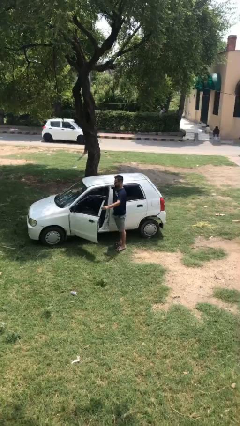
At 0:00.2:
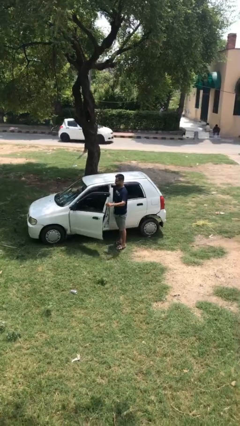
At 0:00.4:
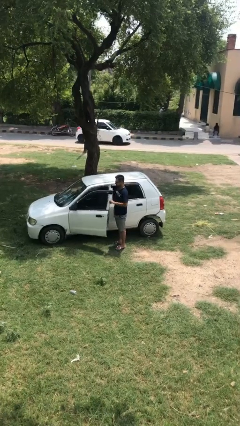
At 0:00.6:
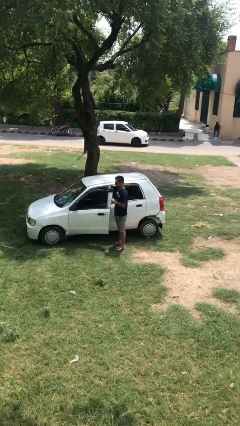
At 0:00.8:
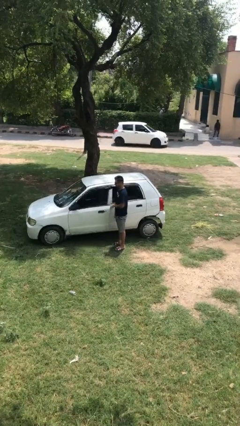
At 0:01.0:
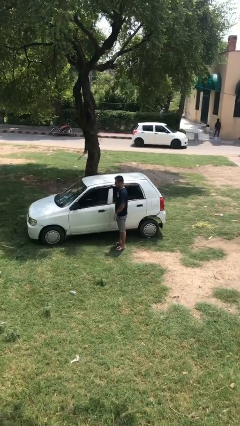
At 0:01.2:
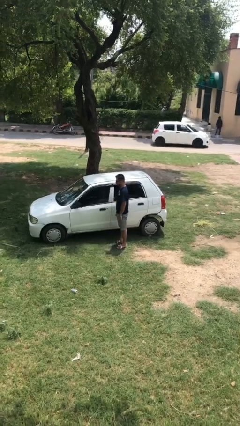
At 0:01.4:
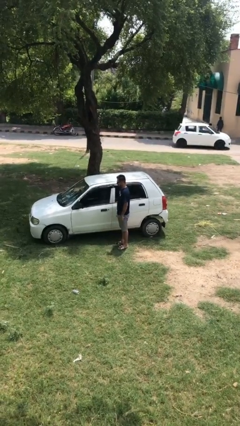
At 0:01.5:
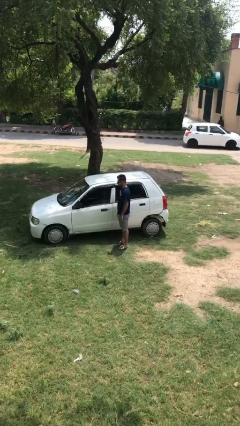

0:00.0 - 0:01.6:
person closes car door

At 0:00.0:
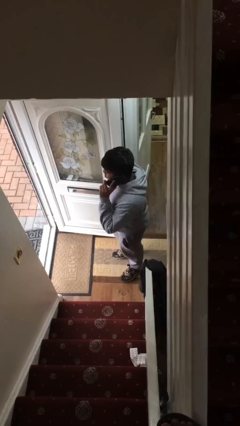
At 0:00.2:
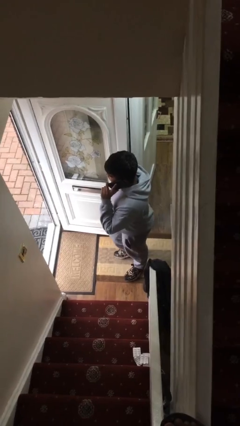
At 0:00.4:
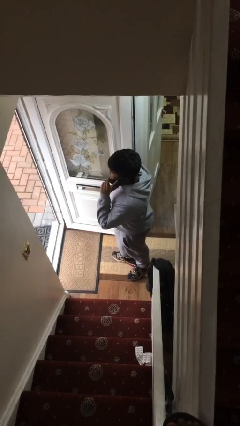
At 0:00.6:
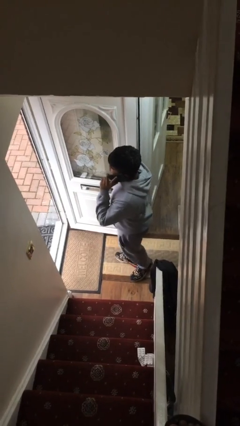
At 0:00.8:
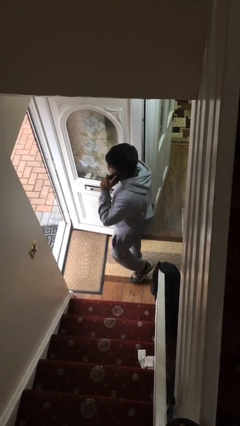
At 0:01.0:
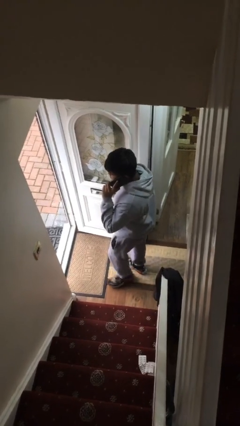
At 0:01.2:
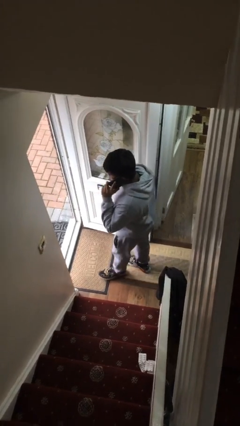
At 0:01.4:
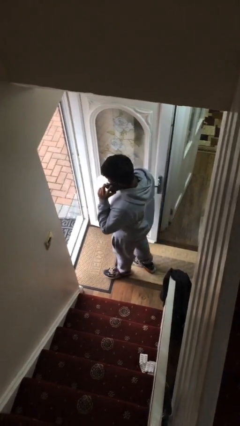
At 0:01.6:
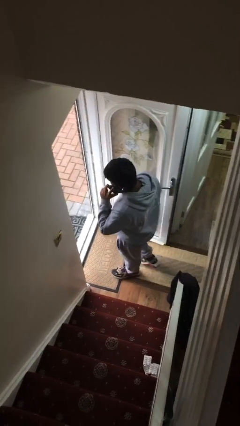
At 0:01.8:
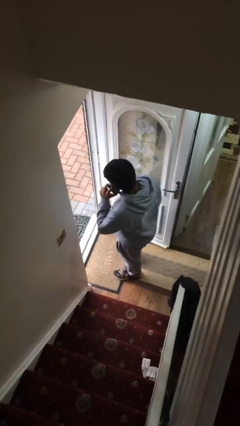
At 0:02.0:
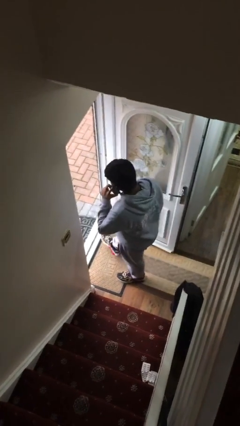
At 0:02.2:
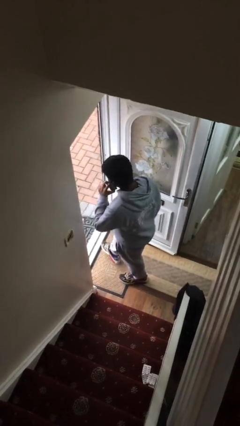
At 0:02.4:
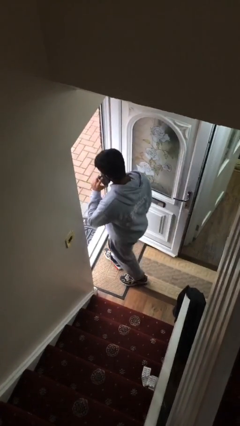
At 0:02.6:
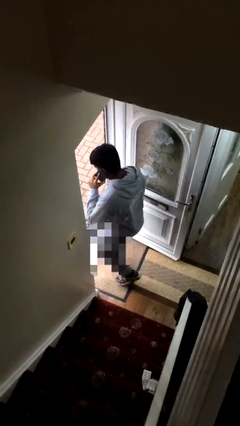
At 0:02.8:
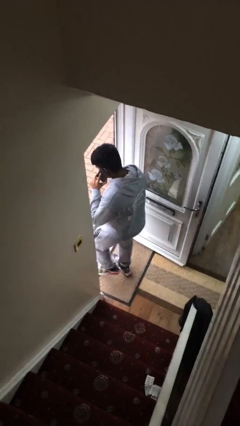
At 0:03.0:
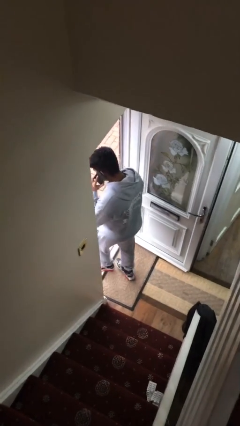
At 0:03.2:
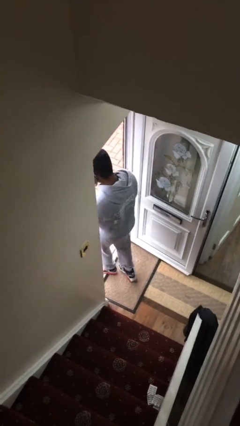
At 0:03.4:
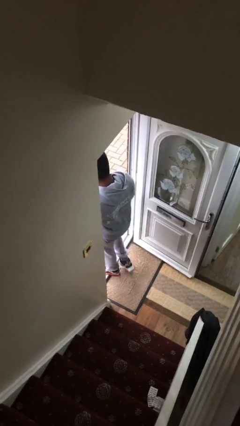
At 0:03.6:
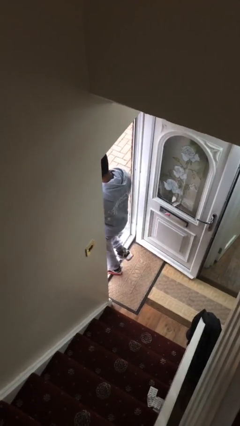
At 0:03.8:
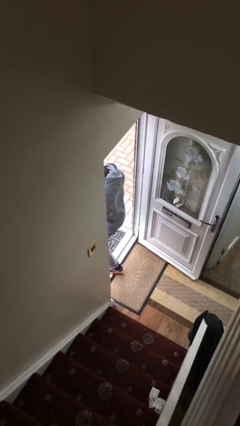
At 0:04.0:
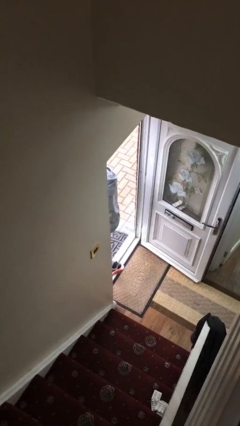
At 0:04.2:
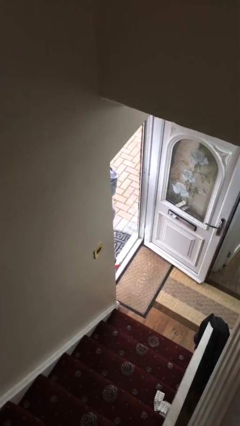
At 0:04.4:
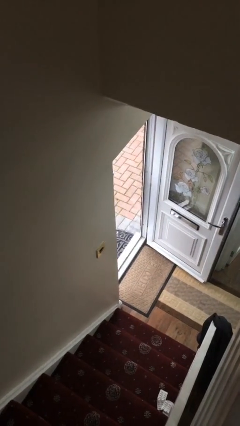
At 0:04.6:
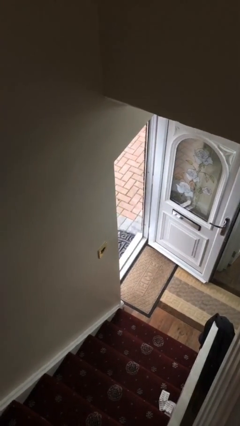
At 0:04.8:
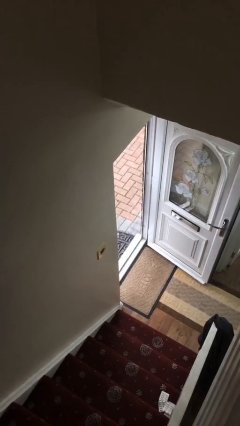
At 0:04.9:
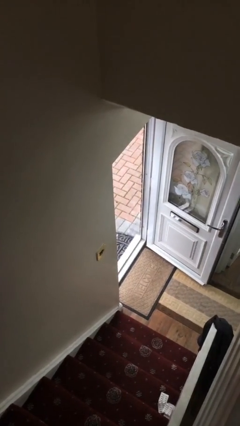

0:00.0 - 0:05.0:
person exits scene through structure

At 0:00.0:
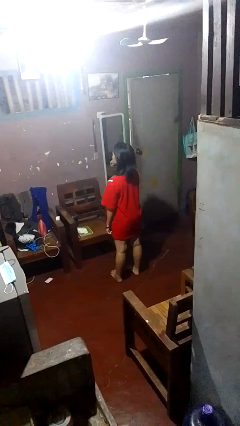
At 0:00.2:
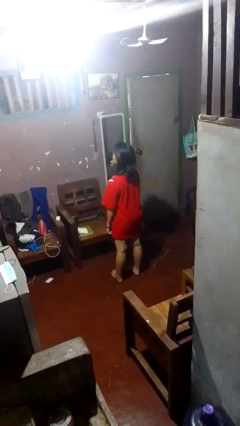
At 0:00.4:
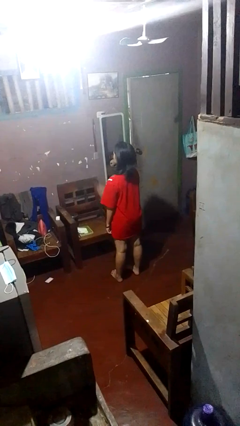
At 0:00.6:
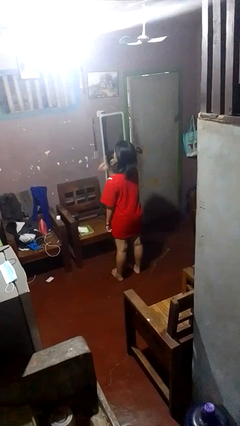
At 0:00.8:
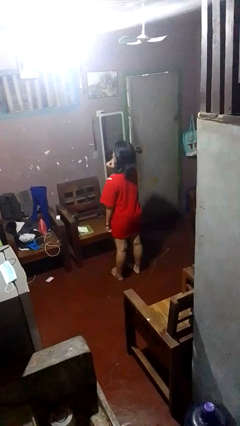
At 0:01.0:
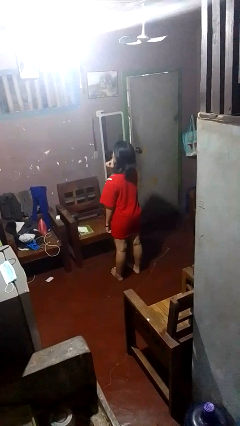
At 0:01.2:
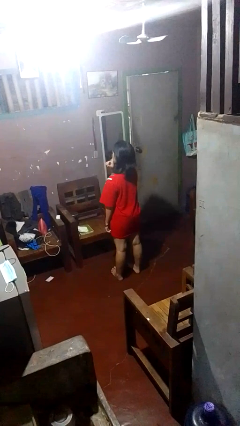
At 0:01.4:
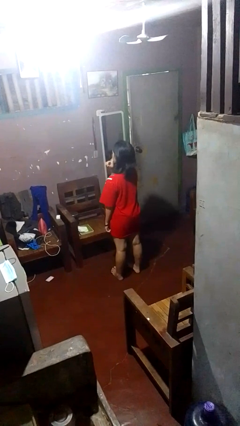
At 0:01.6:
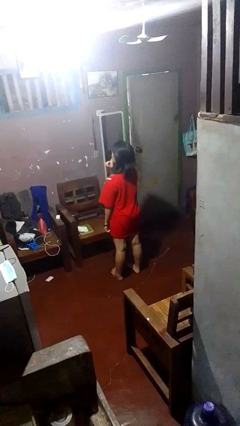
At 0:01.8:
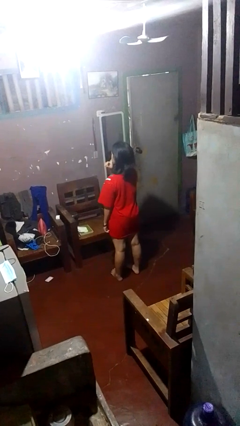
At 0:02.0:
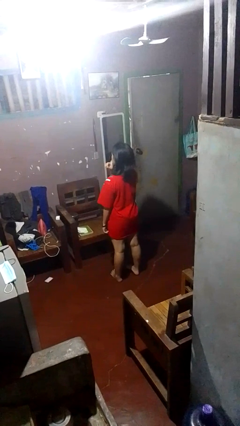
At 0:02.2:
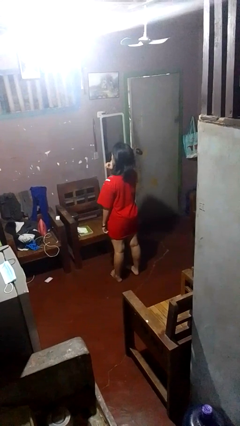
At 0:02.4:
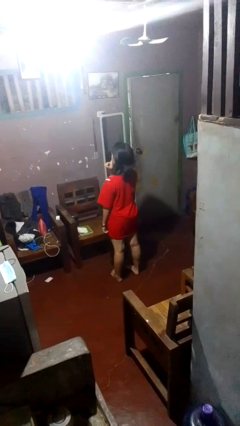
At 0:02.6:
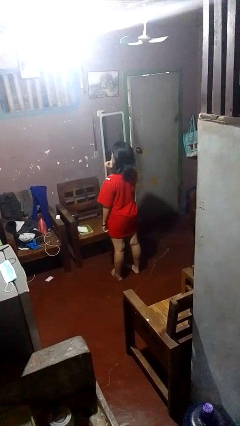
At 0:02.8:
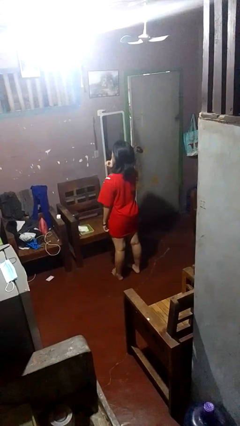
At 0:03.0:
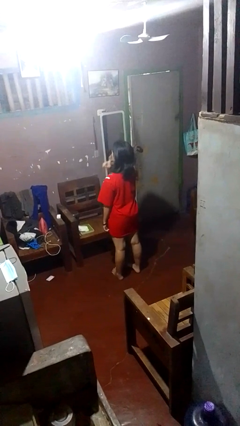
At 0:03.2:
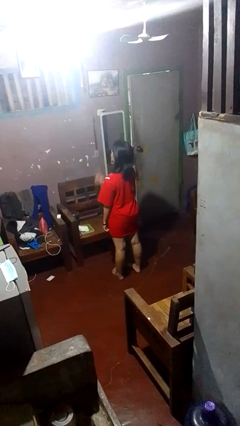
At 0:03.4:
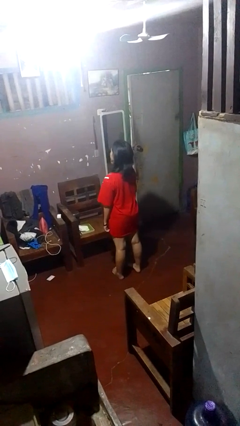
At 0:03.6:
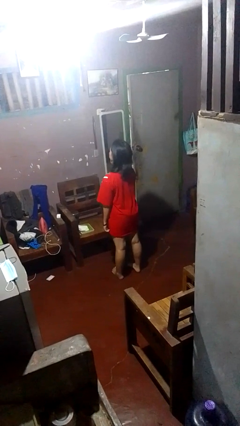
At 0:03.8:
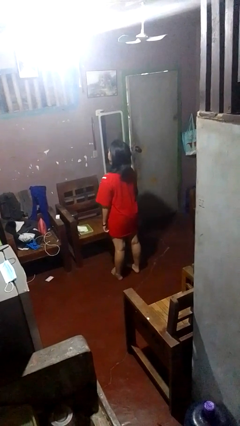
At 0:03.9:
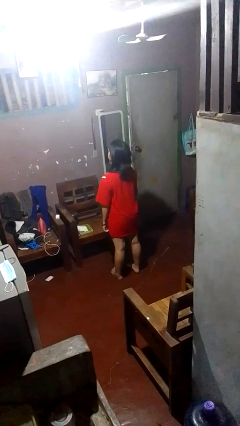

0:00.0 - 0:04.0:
person gestures be quiet

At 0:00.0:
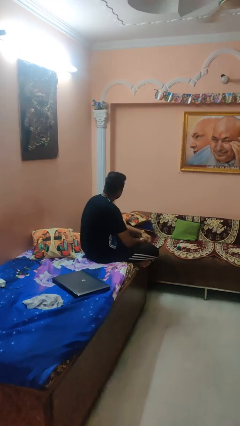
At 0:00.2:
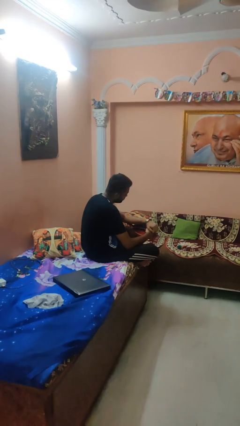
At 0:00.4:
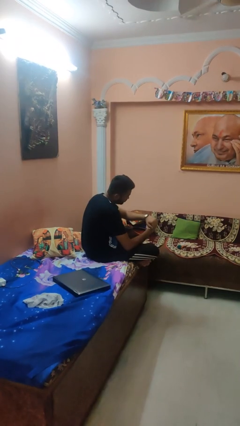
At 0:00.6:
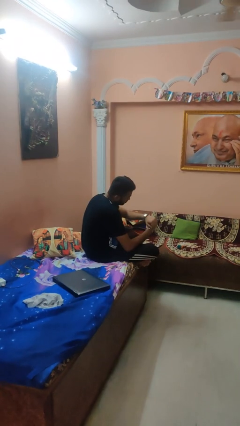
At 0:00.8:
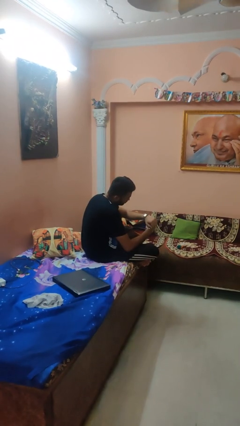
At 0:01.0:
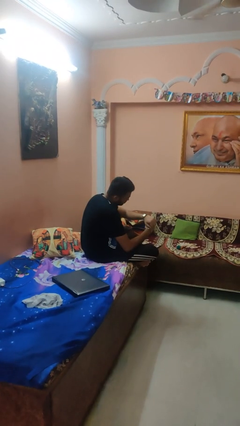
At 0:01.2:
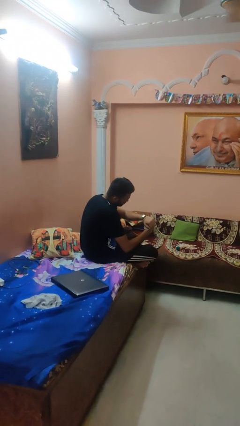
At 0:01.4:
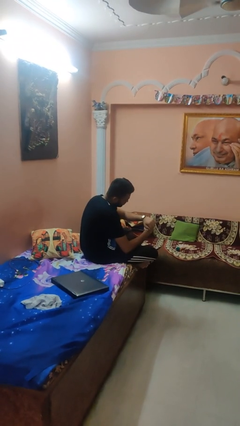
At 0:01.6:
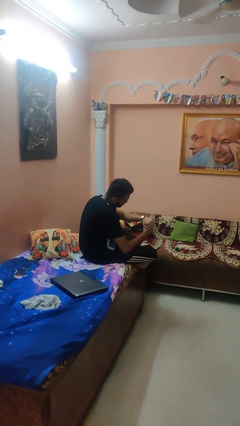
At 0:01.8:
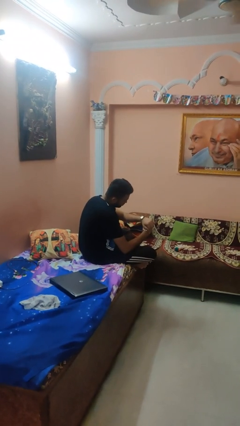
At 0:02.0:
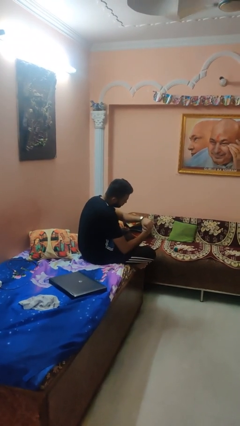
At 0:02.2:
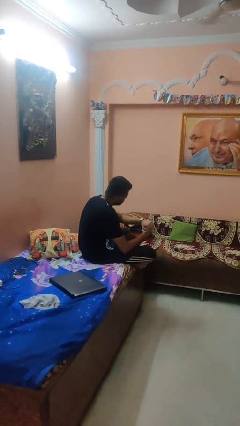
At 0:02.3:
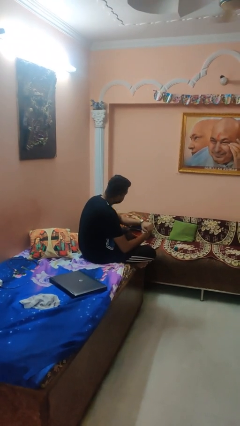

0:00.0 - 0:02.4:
person looks at wristwatch

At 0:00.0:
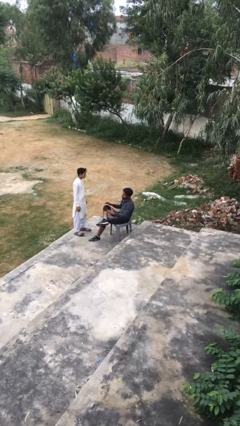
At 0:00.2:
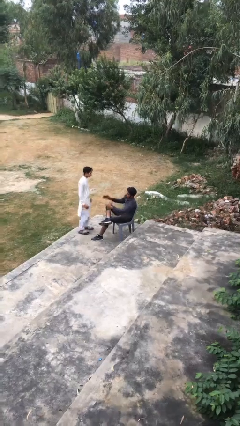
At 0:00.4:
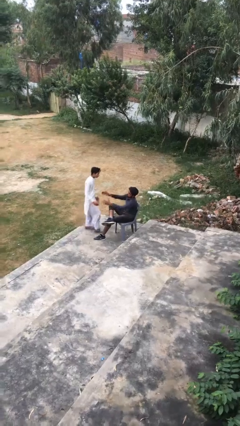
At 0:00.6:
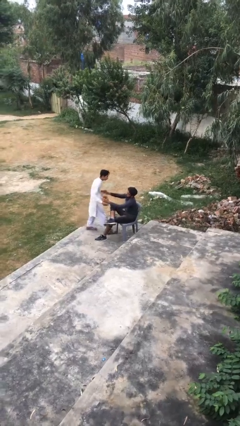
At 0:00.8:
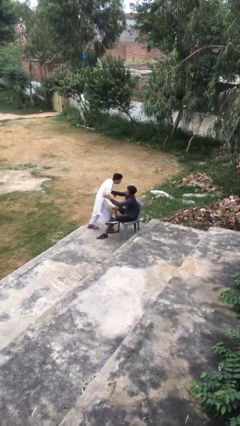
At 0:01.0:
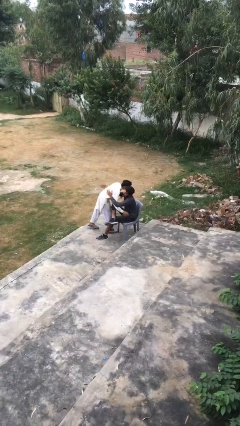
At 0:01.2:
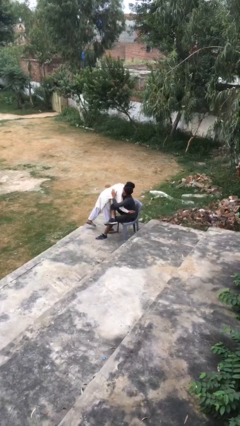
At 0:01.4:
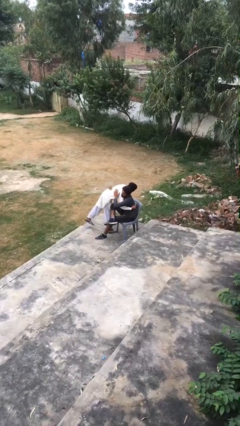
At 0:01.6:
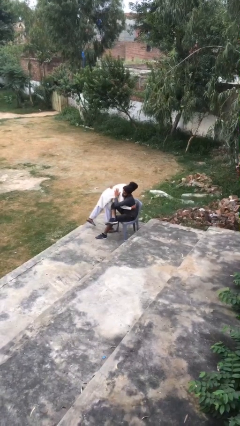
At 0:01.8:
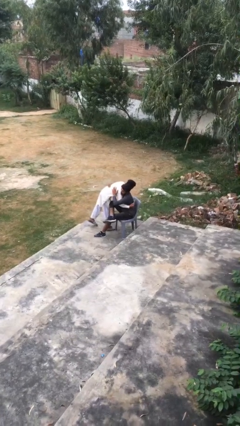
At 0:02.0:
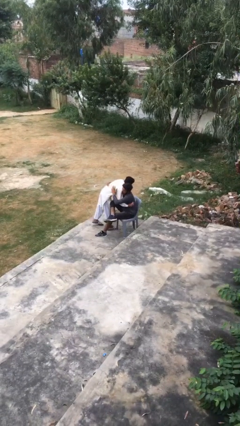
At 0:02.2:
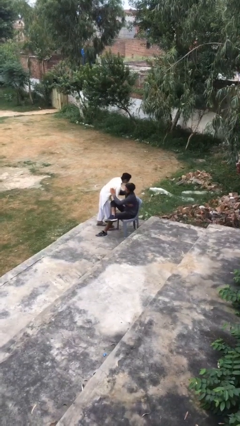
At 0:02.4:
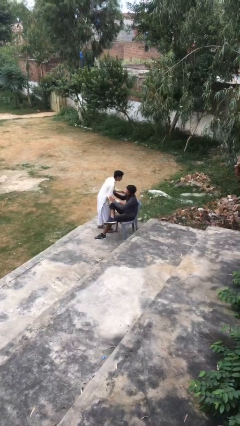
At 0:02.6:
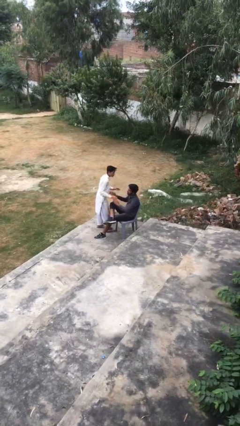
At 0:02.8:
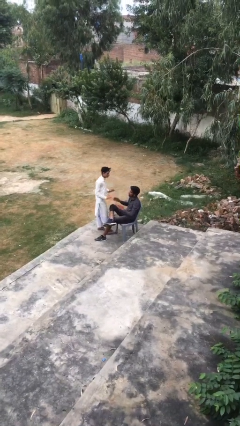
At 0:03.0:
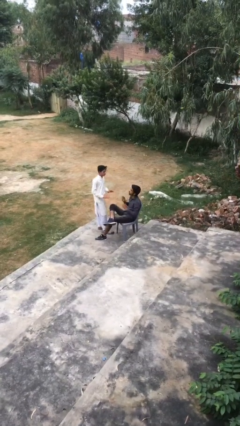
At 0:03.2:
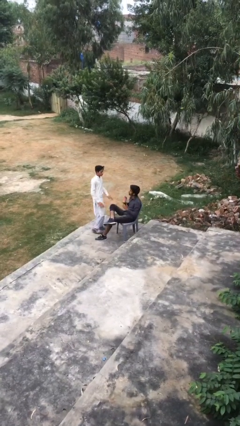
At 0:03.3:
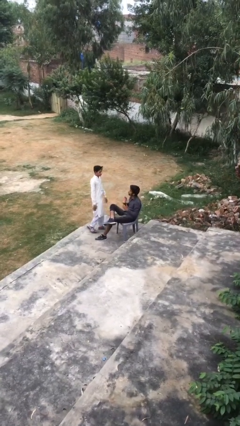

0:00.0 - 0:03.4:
person embraces person

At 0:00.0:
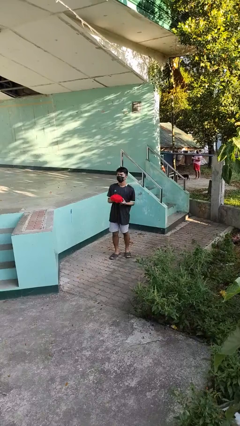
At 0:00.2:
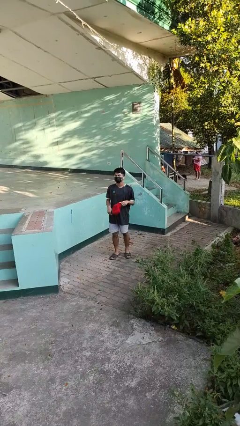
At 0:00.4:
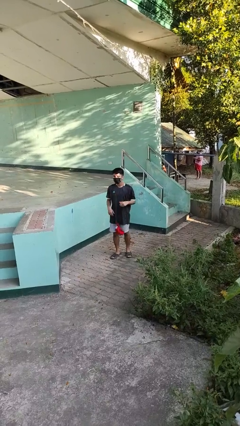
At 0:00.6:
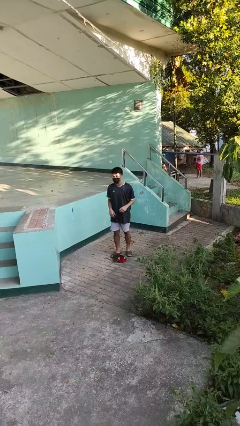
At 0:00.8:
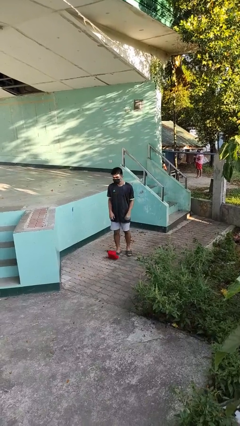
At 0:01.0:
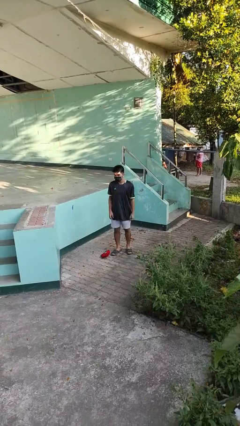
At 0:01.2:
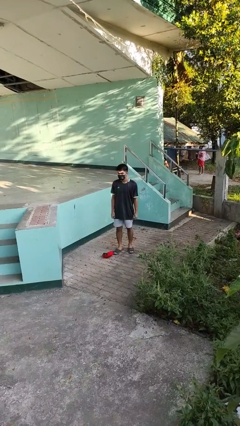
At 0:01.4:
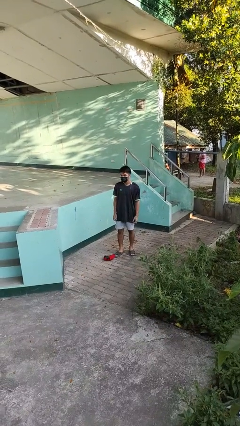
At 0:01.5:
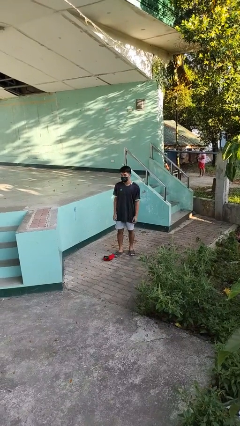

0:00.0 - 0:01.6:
person drops object
